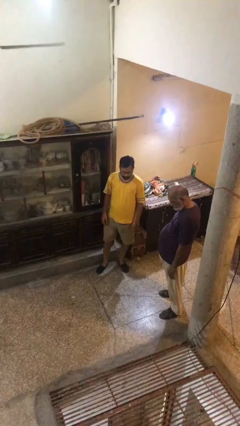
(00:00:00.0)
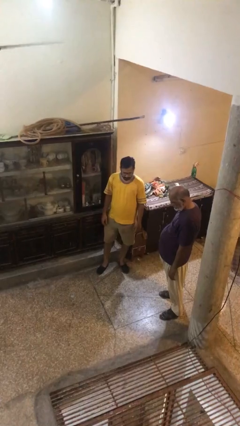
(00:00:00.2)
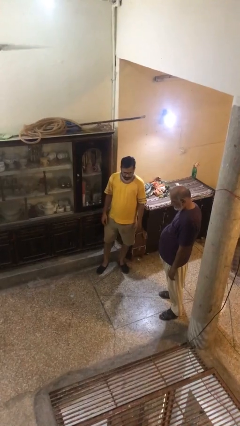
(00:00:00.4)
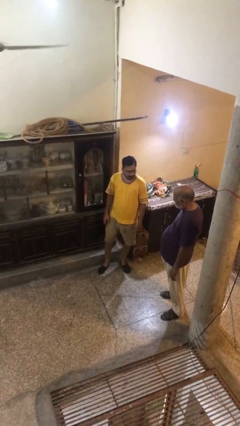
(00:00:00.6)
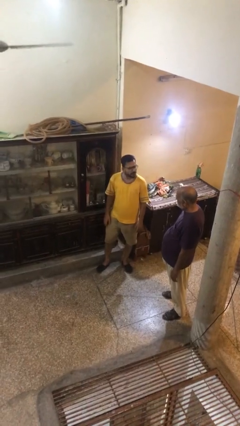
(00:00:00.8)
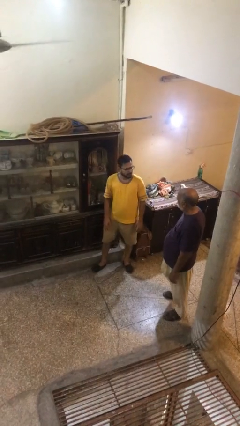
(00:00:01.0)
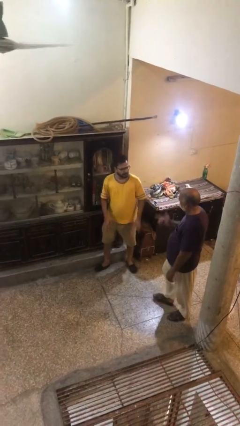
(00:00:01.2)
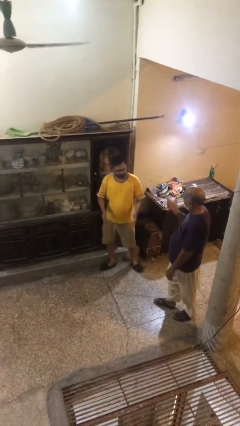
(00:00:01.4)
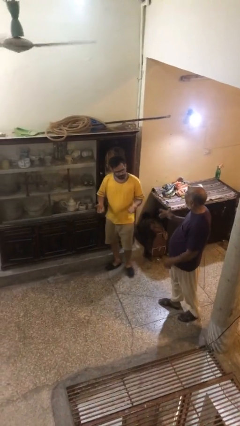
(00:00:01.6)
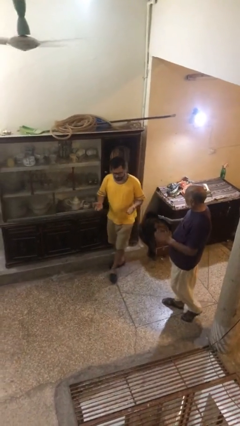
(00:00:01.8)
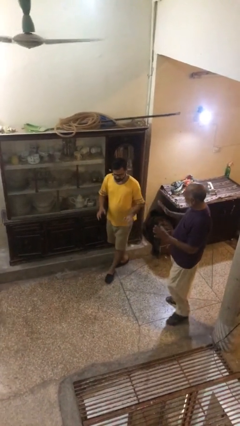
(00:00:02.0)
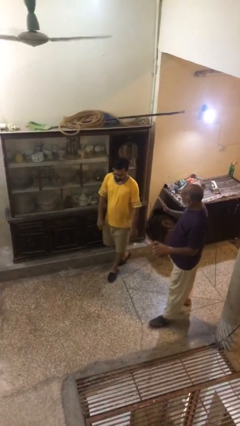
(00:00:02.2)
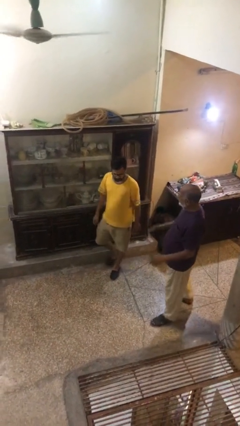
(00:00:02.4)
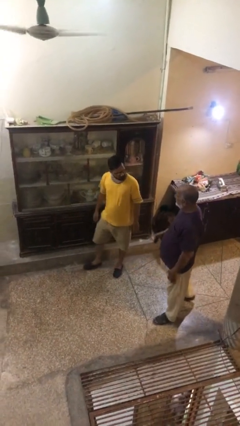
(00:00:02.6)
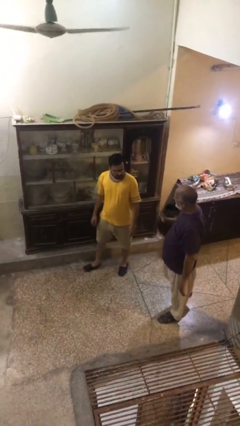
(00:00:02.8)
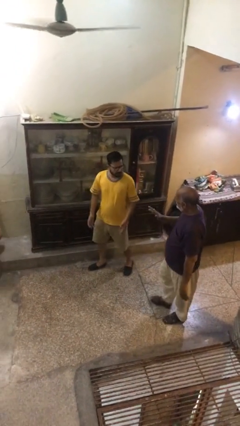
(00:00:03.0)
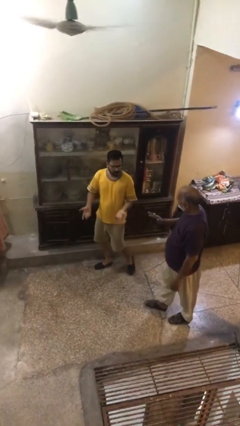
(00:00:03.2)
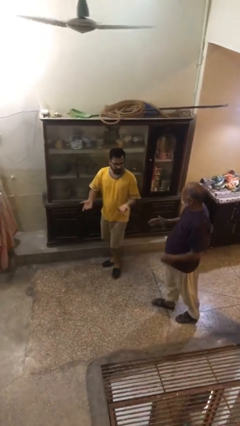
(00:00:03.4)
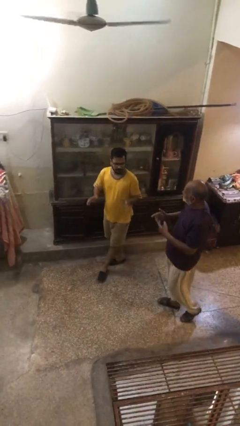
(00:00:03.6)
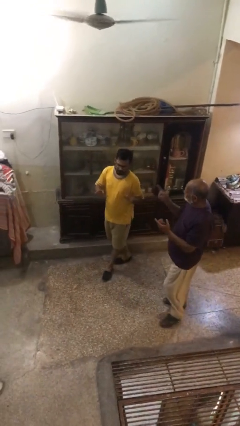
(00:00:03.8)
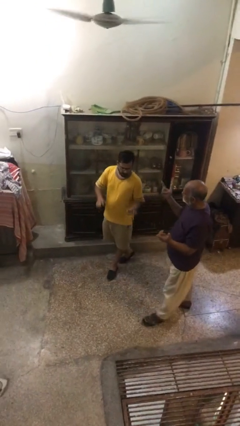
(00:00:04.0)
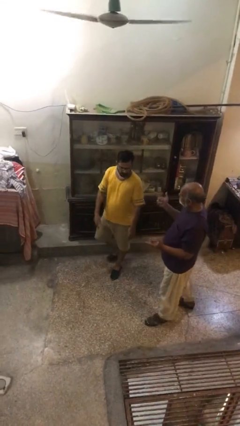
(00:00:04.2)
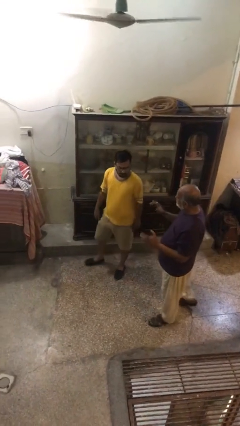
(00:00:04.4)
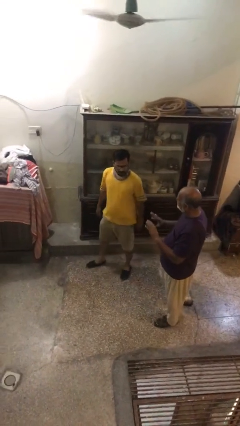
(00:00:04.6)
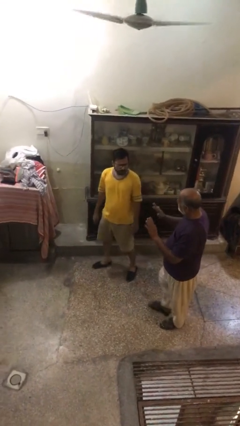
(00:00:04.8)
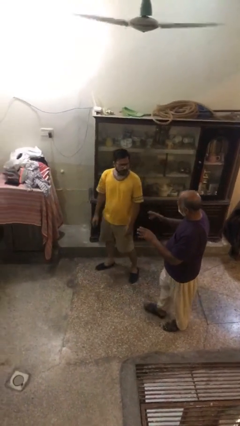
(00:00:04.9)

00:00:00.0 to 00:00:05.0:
person talks to person

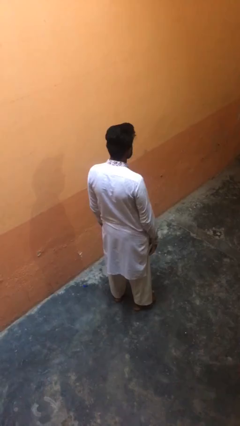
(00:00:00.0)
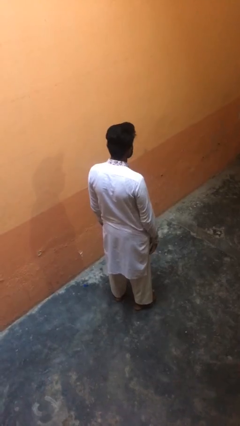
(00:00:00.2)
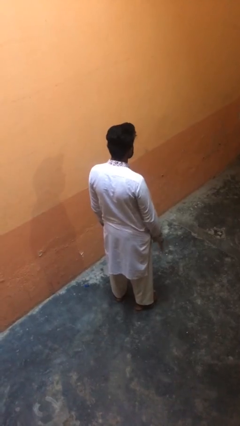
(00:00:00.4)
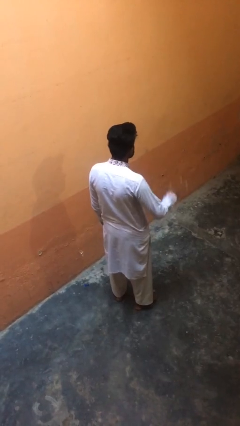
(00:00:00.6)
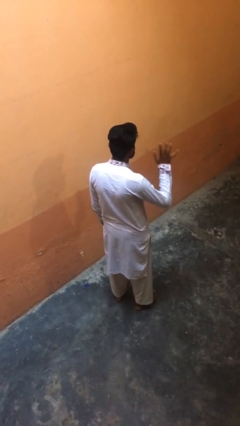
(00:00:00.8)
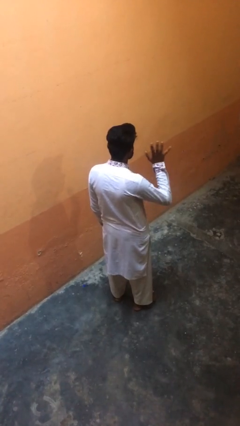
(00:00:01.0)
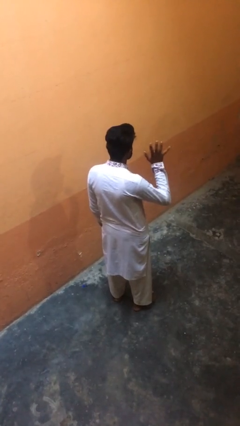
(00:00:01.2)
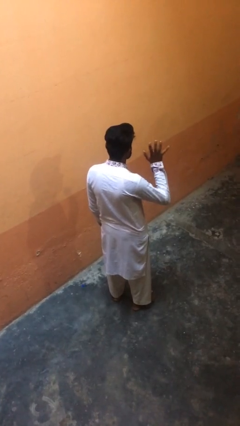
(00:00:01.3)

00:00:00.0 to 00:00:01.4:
person gestures number five

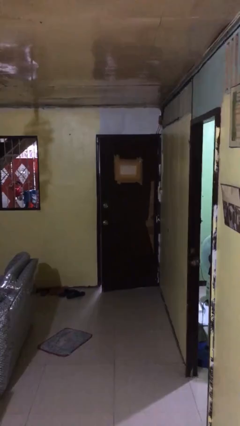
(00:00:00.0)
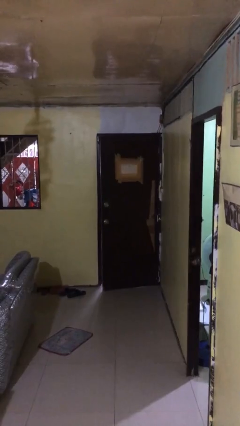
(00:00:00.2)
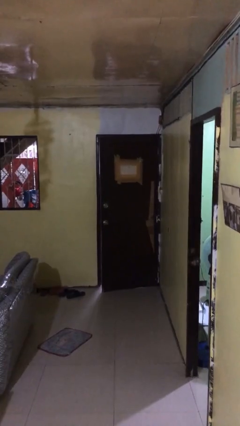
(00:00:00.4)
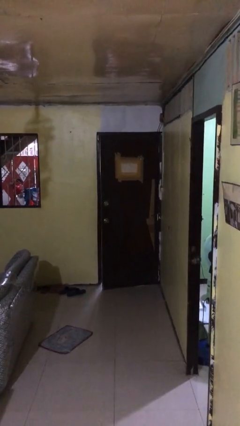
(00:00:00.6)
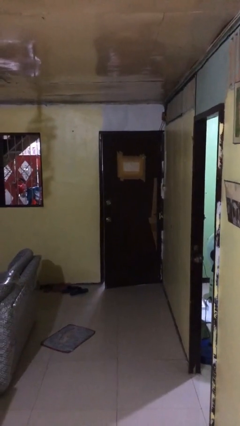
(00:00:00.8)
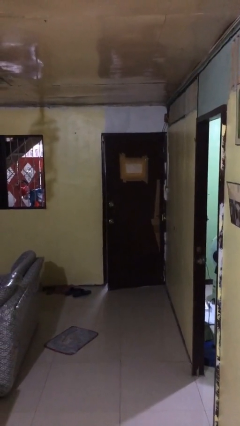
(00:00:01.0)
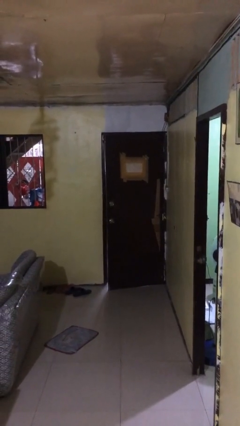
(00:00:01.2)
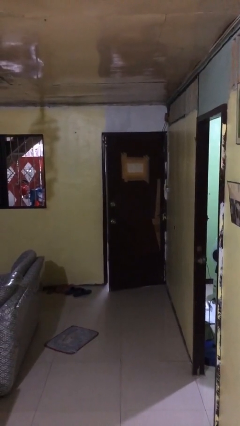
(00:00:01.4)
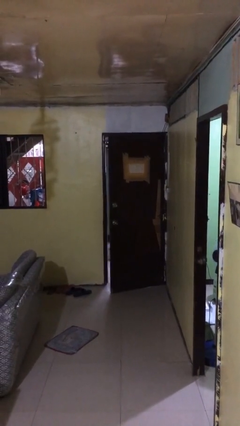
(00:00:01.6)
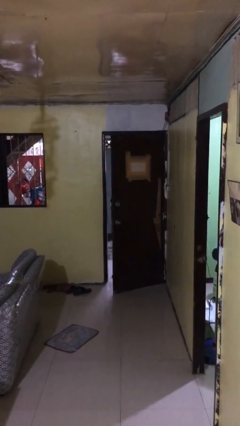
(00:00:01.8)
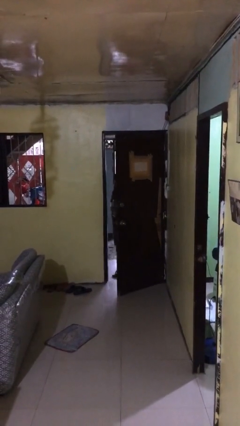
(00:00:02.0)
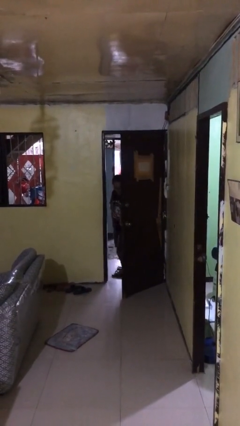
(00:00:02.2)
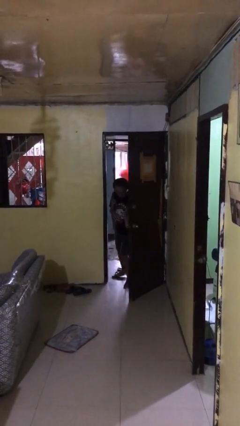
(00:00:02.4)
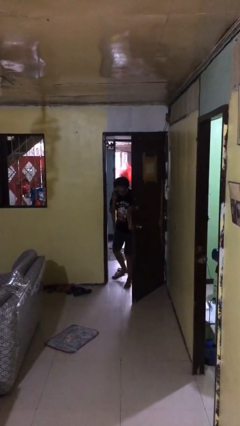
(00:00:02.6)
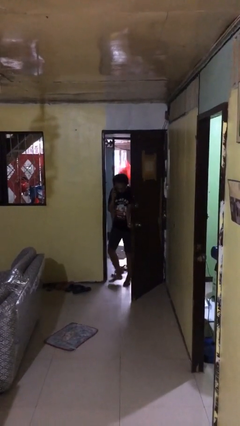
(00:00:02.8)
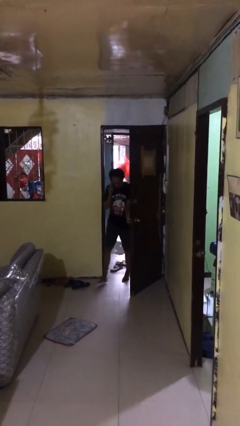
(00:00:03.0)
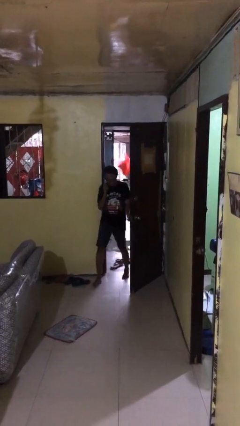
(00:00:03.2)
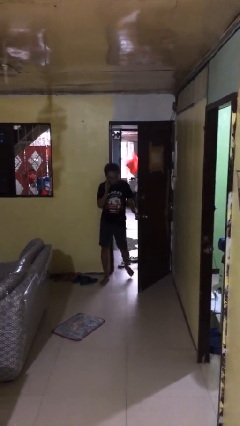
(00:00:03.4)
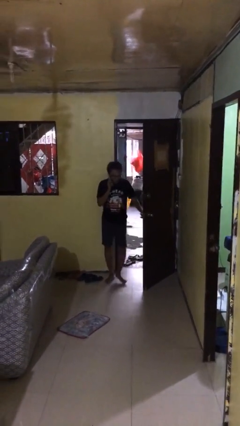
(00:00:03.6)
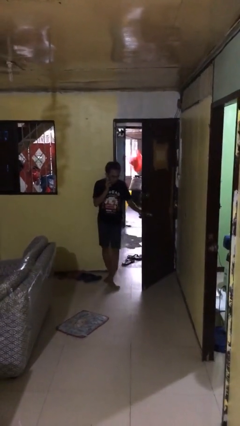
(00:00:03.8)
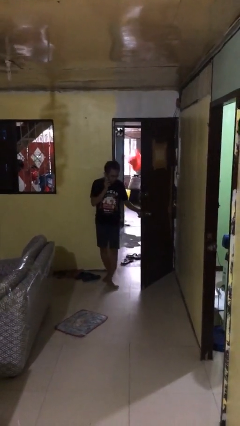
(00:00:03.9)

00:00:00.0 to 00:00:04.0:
person opens facility door

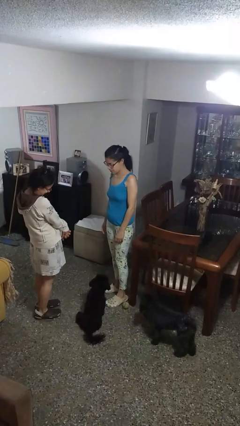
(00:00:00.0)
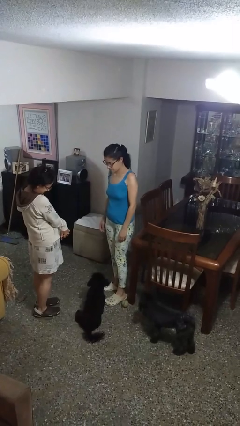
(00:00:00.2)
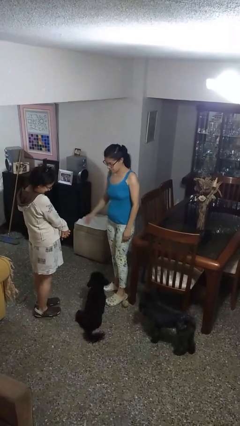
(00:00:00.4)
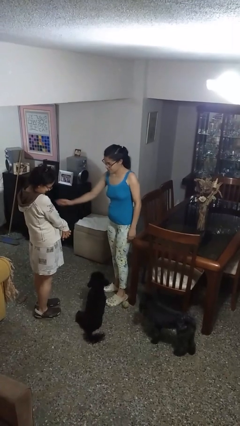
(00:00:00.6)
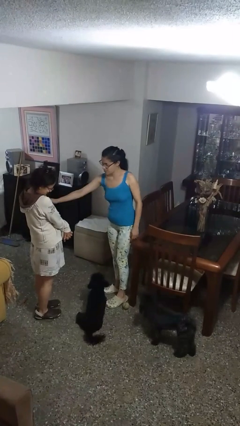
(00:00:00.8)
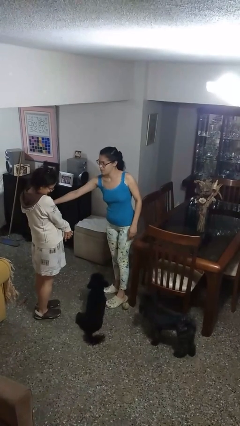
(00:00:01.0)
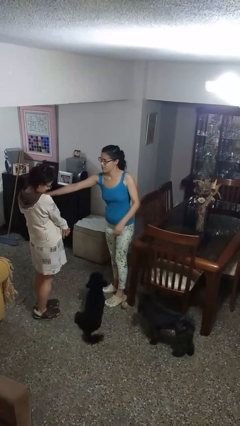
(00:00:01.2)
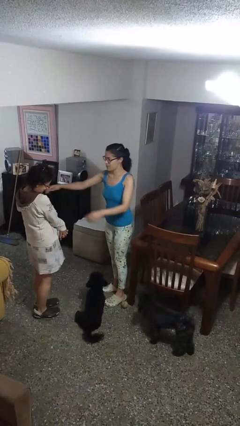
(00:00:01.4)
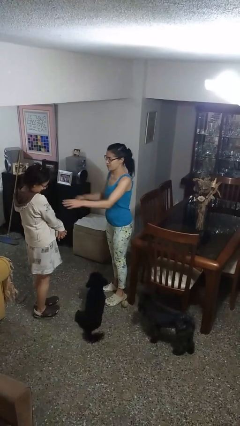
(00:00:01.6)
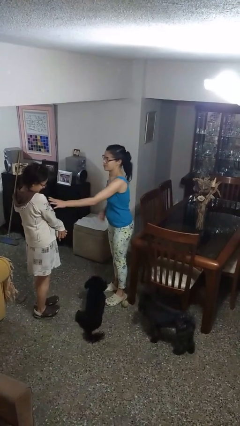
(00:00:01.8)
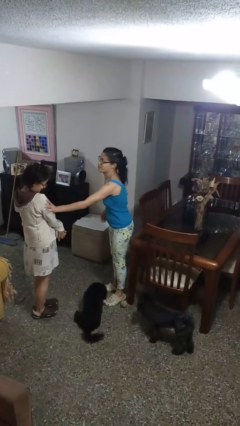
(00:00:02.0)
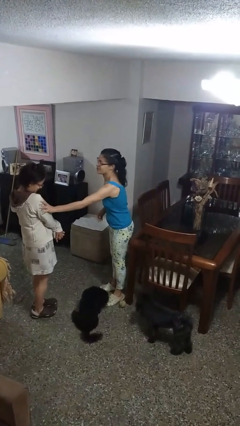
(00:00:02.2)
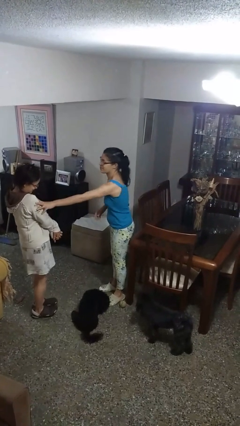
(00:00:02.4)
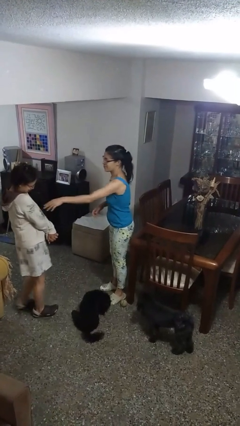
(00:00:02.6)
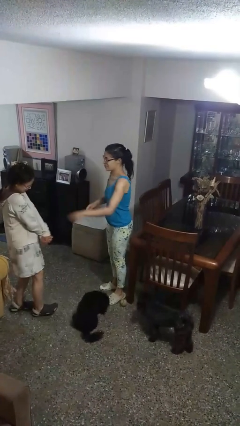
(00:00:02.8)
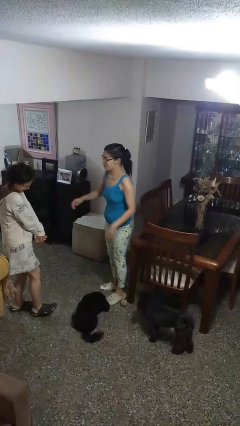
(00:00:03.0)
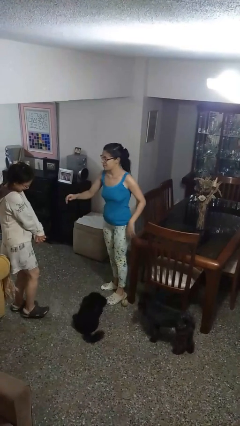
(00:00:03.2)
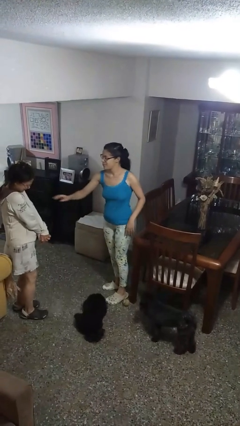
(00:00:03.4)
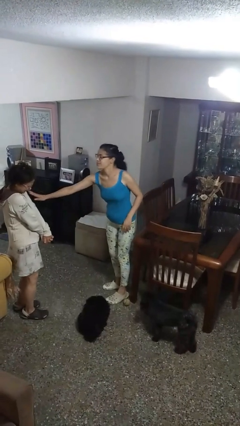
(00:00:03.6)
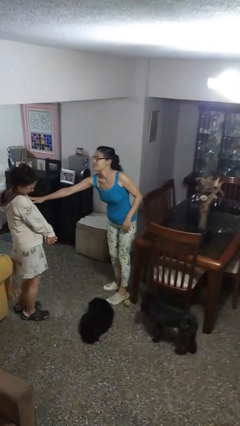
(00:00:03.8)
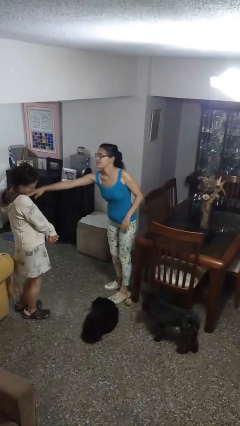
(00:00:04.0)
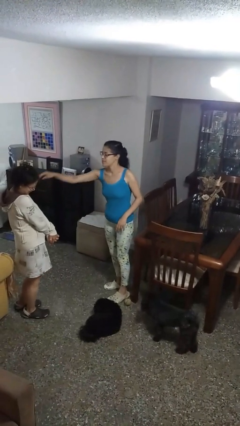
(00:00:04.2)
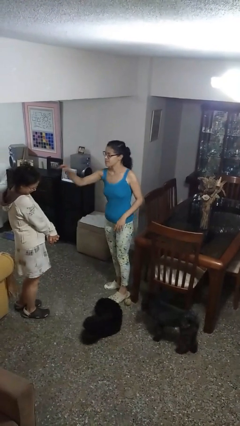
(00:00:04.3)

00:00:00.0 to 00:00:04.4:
person shoves person

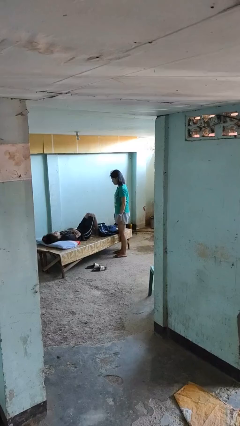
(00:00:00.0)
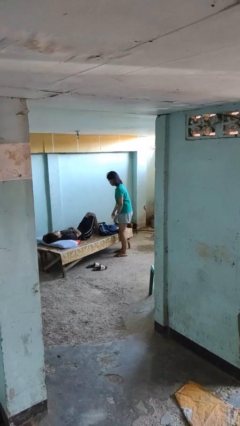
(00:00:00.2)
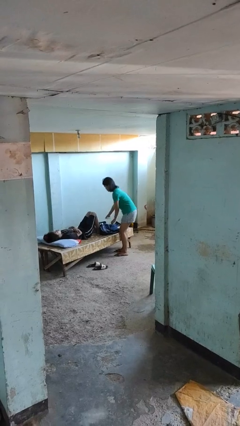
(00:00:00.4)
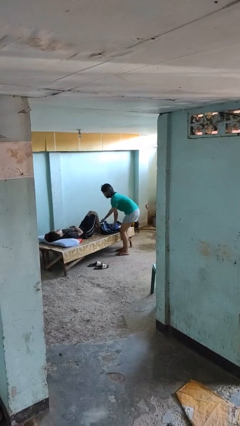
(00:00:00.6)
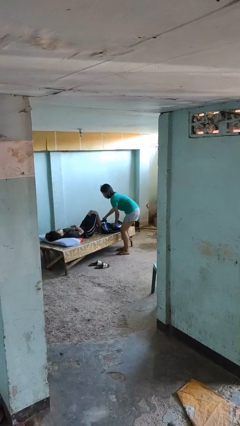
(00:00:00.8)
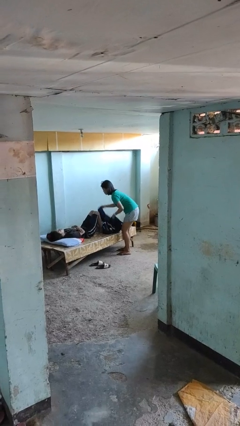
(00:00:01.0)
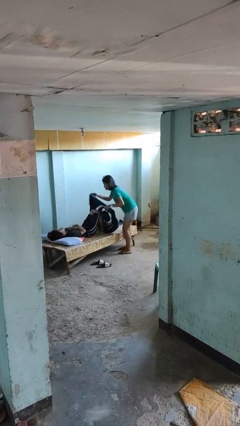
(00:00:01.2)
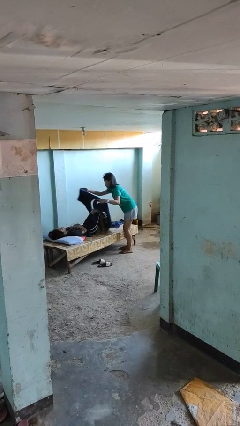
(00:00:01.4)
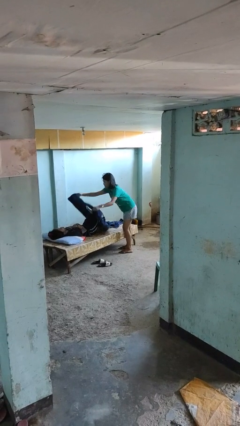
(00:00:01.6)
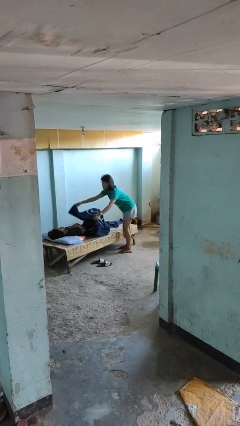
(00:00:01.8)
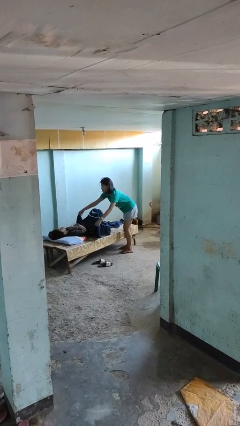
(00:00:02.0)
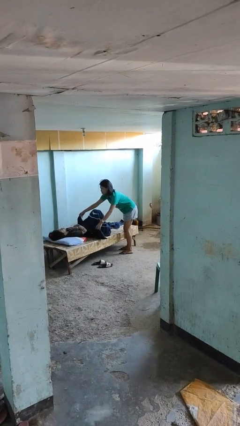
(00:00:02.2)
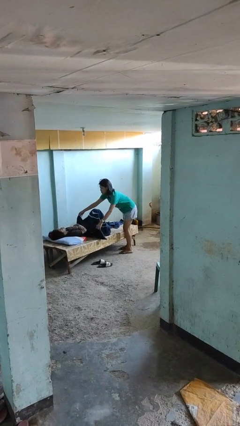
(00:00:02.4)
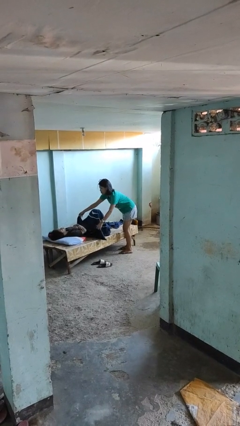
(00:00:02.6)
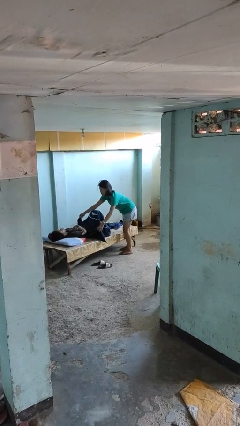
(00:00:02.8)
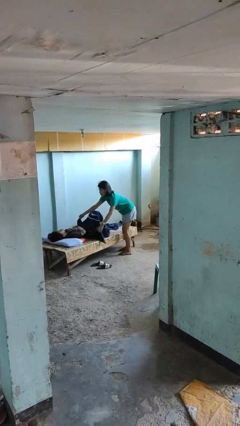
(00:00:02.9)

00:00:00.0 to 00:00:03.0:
person covers friend with blanket
